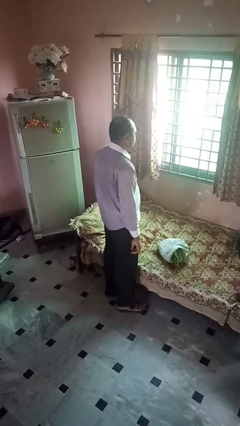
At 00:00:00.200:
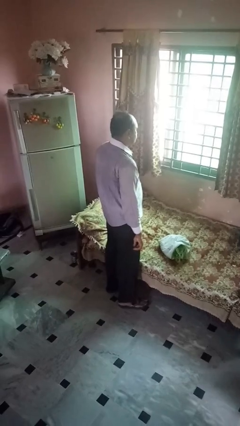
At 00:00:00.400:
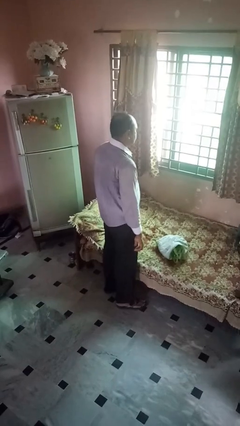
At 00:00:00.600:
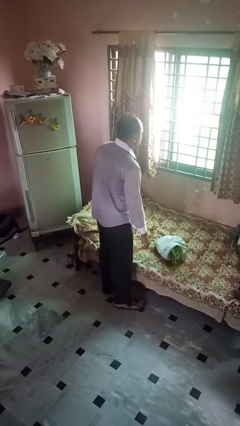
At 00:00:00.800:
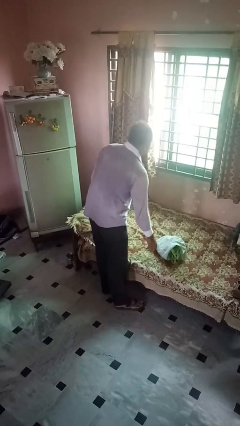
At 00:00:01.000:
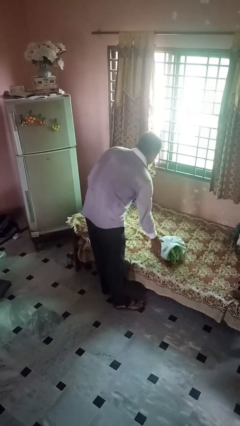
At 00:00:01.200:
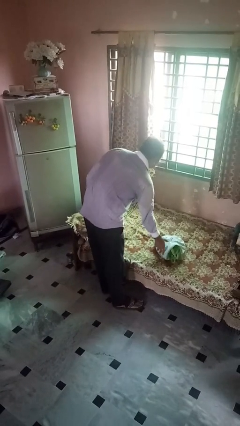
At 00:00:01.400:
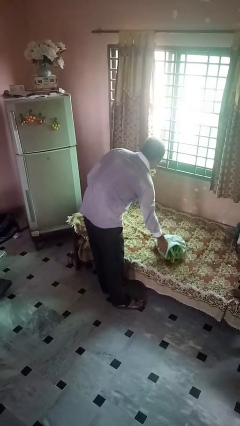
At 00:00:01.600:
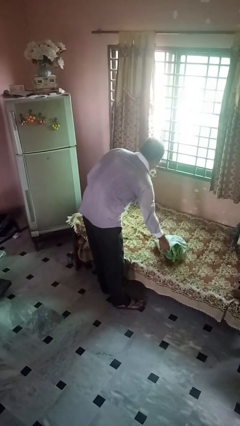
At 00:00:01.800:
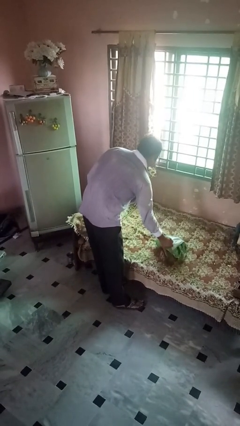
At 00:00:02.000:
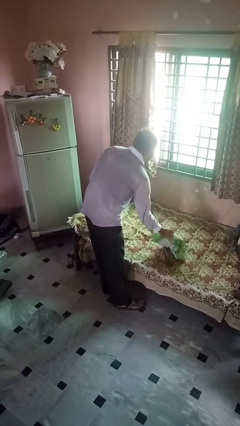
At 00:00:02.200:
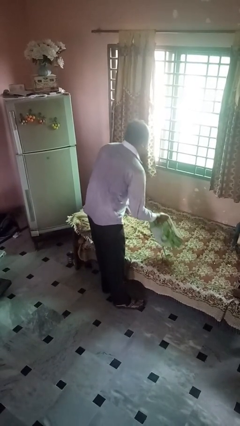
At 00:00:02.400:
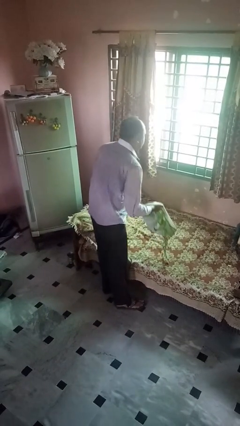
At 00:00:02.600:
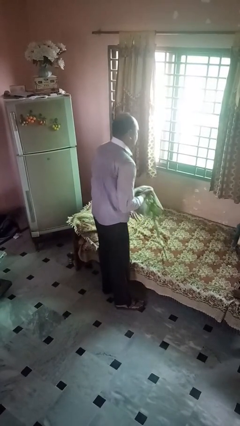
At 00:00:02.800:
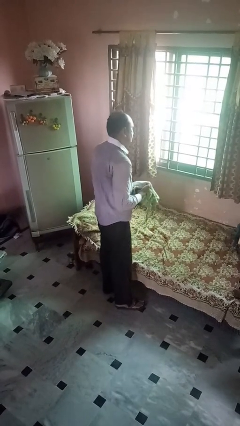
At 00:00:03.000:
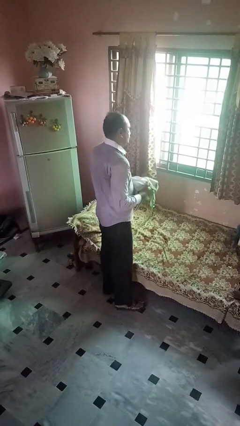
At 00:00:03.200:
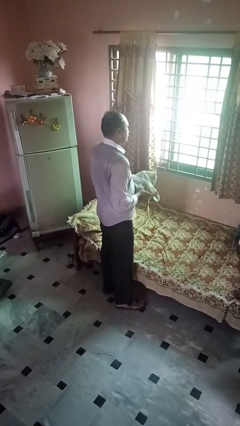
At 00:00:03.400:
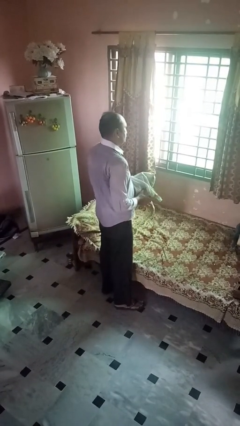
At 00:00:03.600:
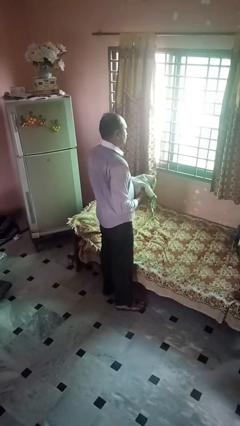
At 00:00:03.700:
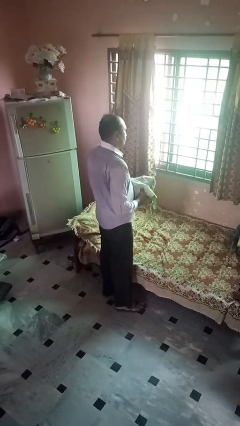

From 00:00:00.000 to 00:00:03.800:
person picks up object from bed

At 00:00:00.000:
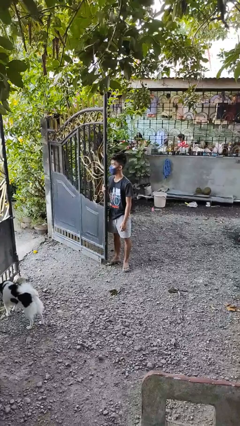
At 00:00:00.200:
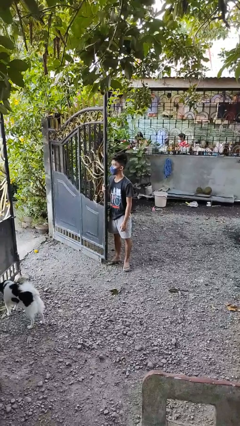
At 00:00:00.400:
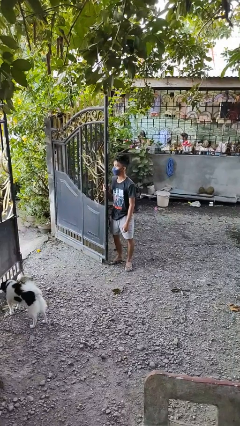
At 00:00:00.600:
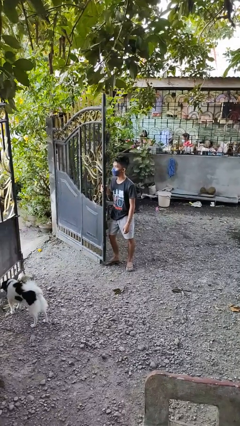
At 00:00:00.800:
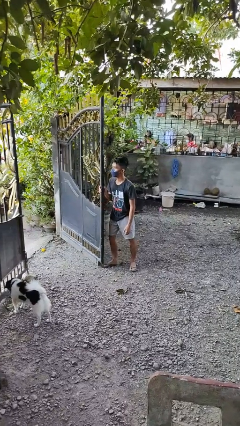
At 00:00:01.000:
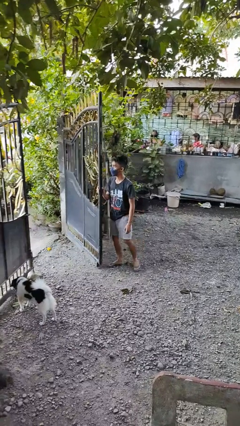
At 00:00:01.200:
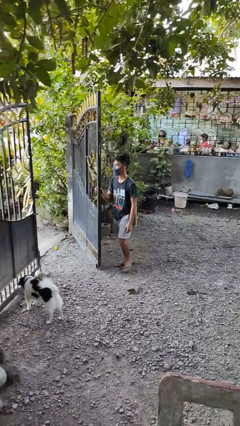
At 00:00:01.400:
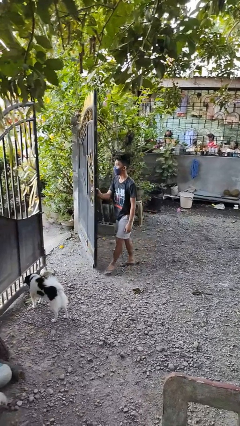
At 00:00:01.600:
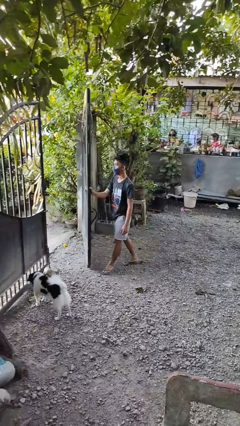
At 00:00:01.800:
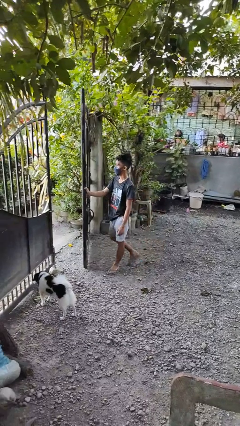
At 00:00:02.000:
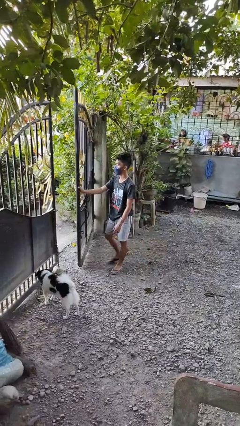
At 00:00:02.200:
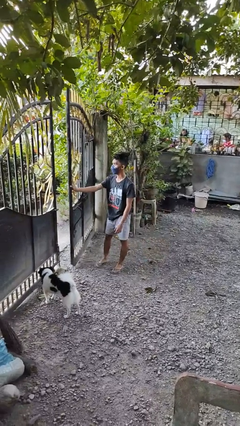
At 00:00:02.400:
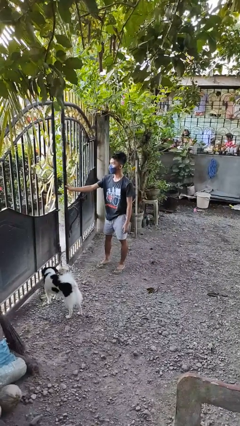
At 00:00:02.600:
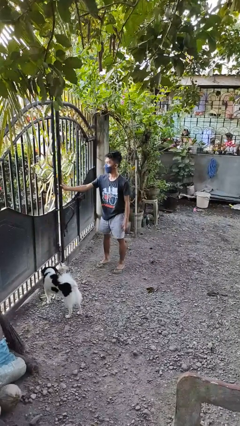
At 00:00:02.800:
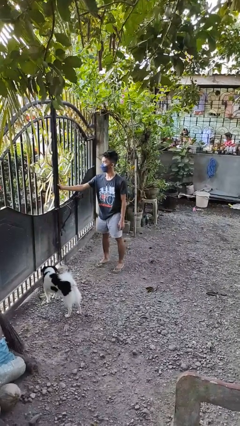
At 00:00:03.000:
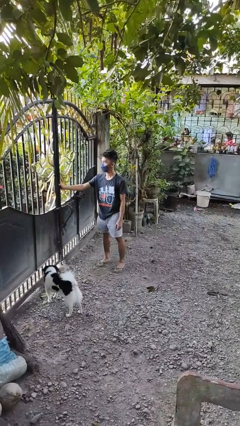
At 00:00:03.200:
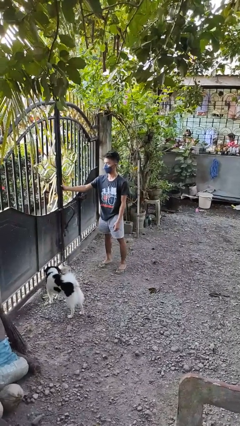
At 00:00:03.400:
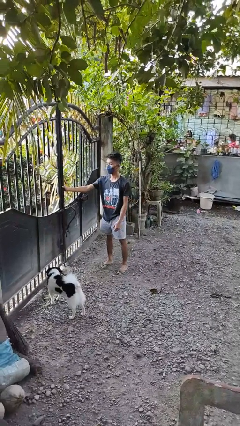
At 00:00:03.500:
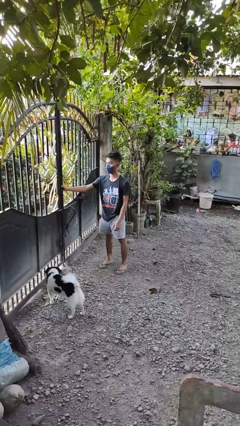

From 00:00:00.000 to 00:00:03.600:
person closes gate

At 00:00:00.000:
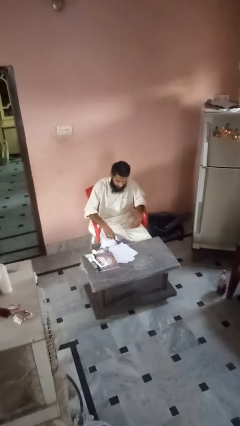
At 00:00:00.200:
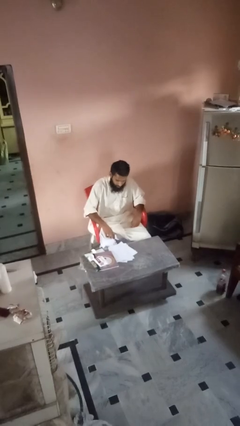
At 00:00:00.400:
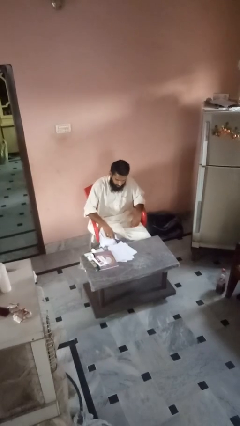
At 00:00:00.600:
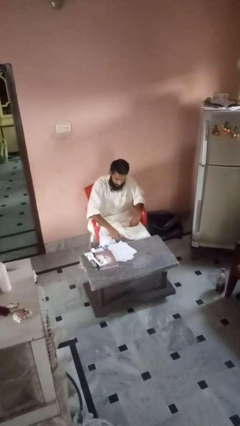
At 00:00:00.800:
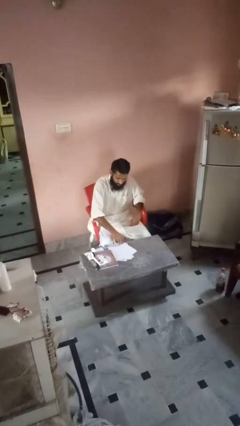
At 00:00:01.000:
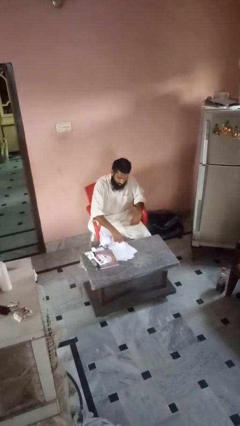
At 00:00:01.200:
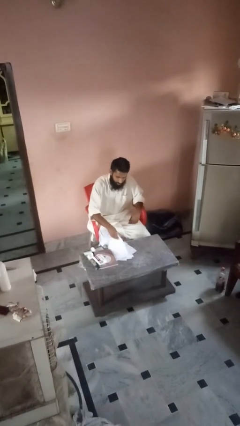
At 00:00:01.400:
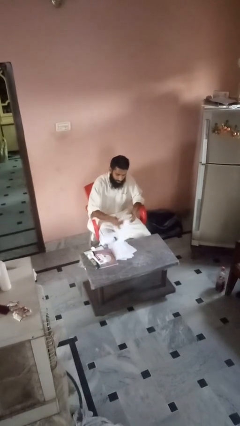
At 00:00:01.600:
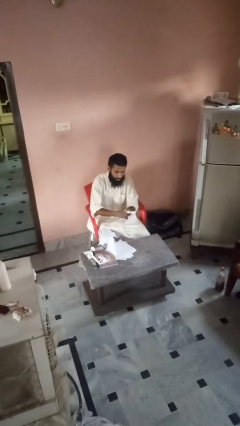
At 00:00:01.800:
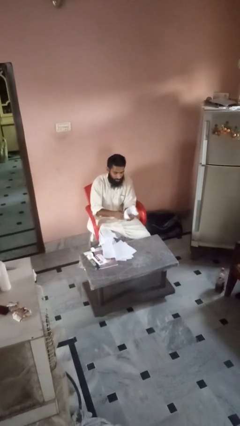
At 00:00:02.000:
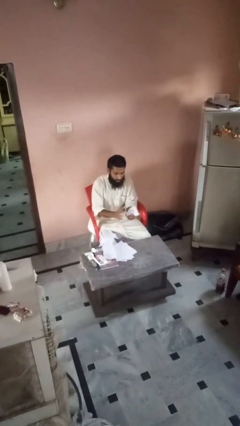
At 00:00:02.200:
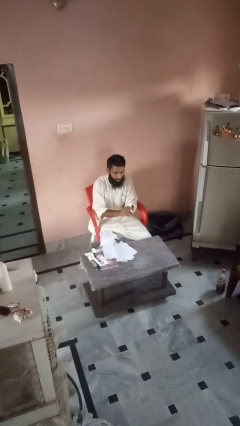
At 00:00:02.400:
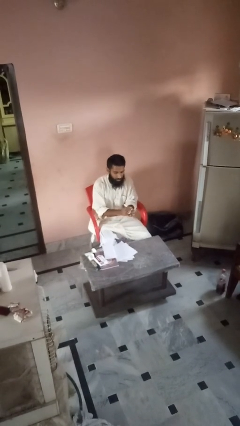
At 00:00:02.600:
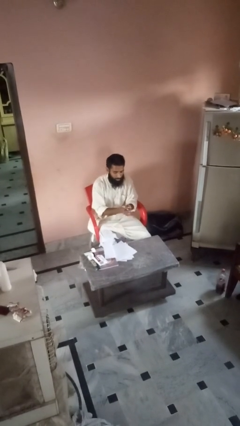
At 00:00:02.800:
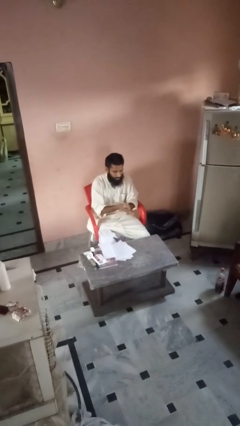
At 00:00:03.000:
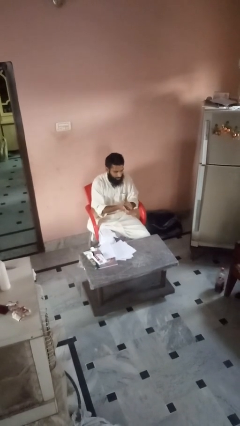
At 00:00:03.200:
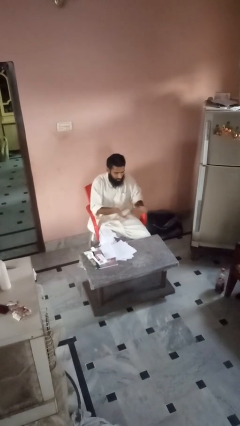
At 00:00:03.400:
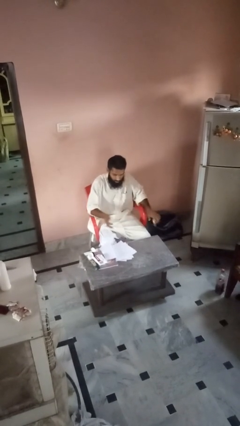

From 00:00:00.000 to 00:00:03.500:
person crumples paper

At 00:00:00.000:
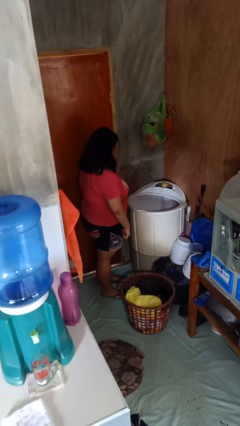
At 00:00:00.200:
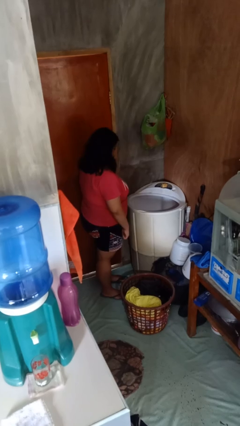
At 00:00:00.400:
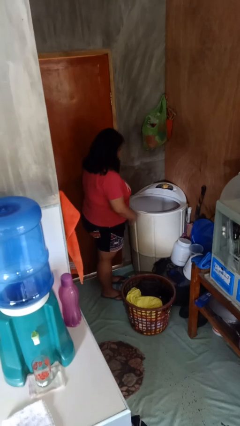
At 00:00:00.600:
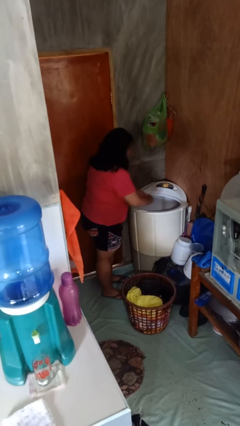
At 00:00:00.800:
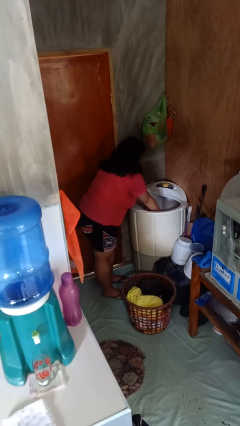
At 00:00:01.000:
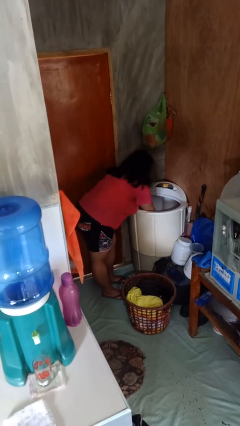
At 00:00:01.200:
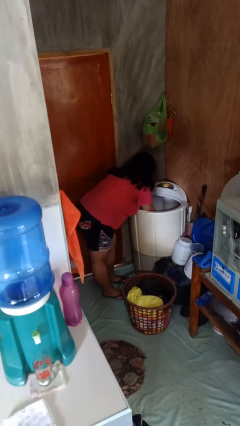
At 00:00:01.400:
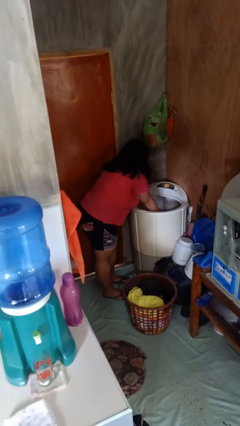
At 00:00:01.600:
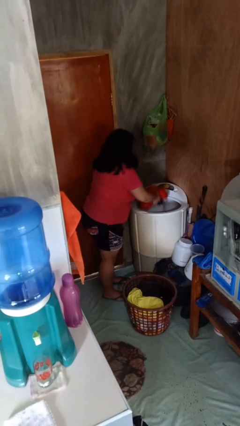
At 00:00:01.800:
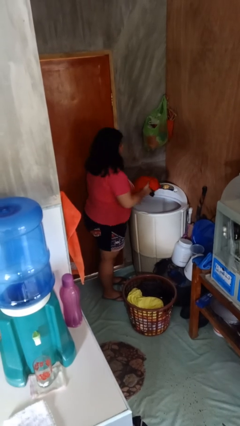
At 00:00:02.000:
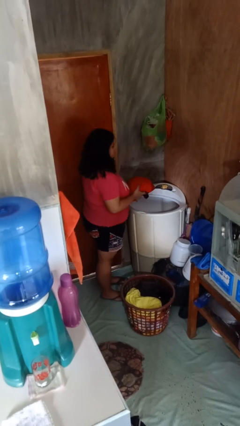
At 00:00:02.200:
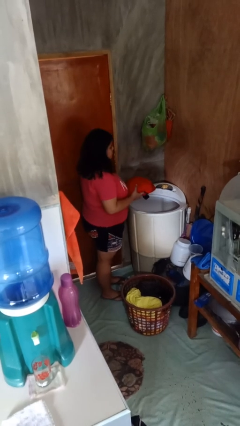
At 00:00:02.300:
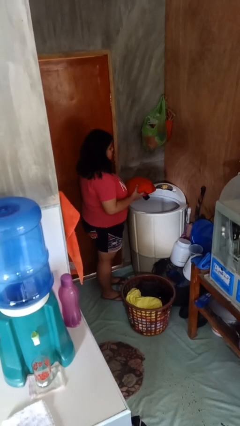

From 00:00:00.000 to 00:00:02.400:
person unloads dryer

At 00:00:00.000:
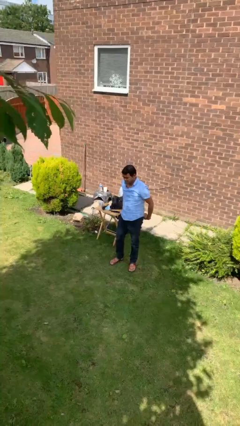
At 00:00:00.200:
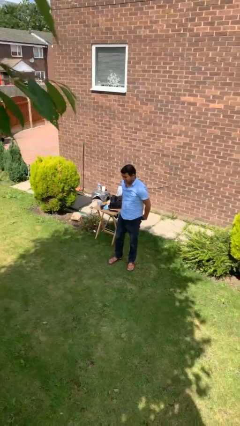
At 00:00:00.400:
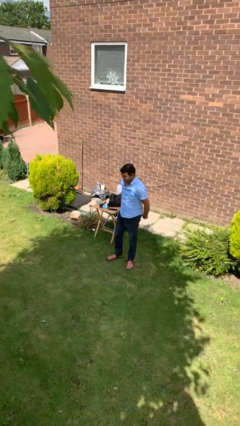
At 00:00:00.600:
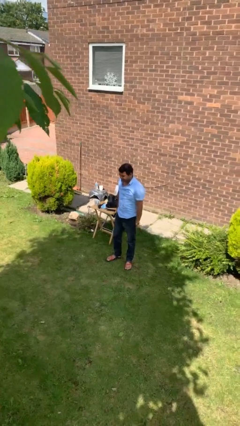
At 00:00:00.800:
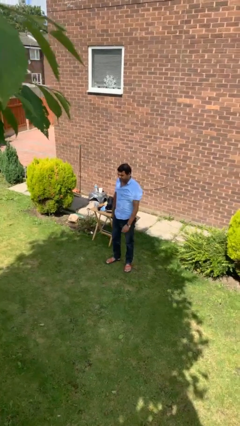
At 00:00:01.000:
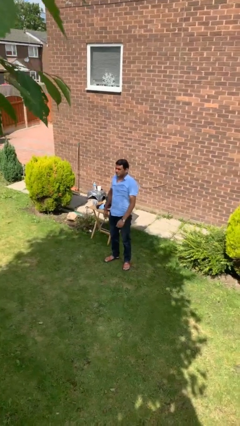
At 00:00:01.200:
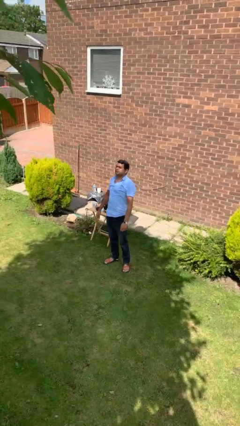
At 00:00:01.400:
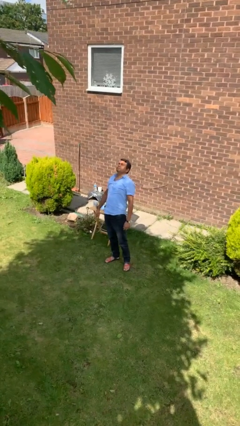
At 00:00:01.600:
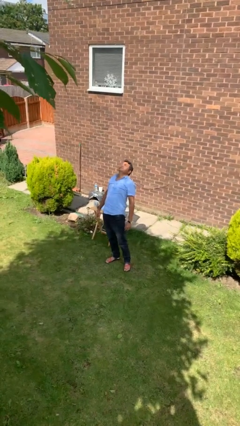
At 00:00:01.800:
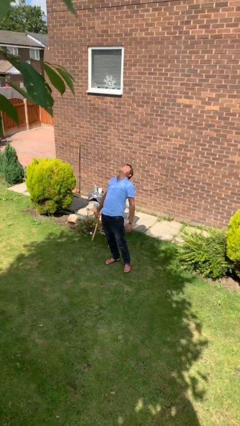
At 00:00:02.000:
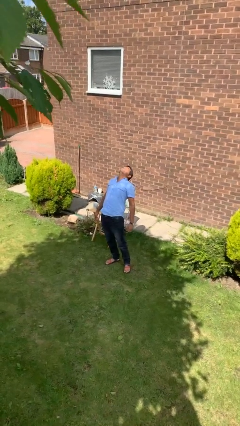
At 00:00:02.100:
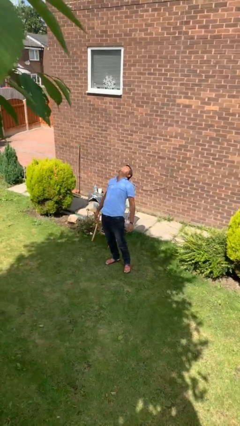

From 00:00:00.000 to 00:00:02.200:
person stretches back

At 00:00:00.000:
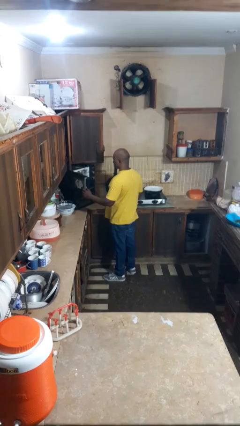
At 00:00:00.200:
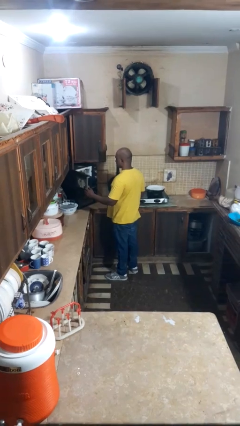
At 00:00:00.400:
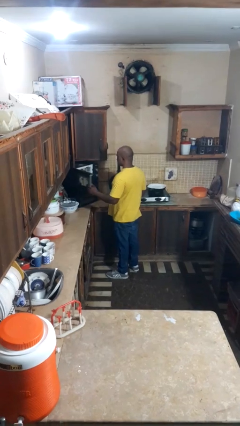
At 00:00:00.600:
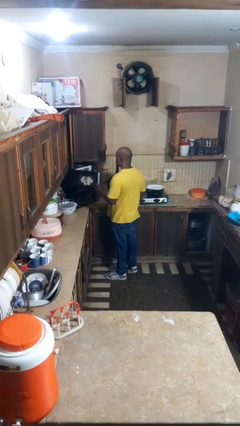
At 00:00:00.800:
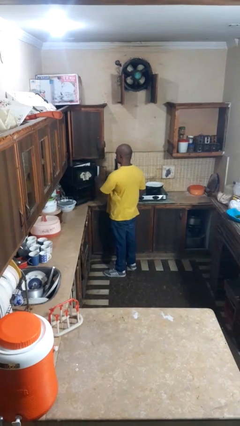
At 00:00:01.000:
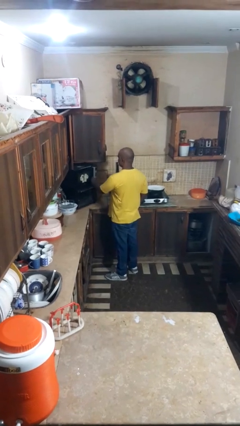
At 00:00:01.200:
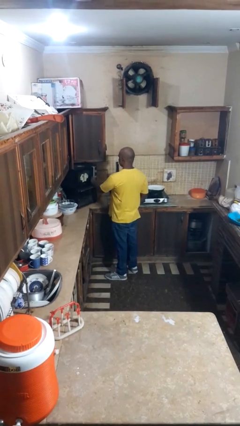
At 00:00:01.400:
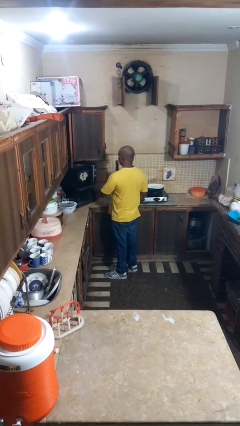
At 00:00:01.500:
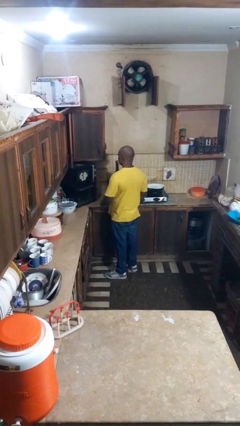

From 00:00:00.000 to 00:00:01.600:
person closes microwave
